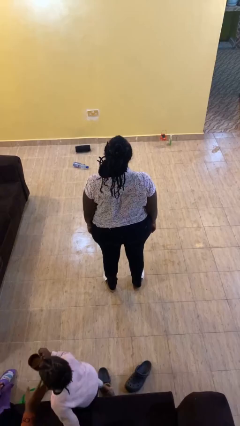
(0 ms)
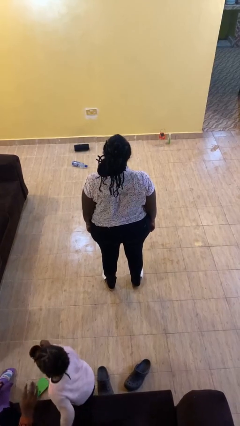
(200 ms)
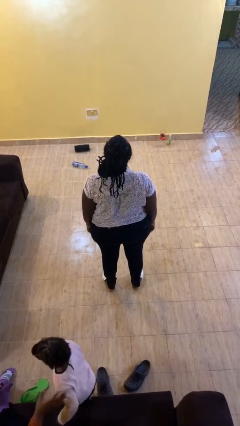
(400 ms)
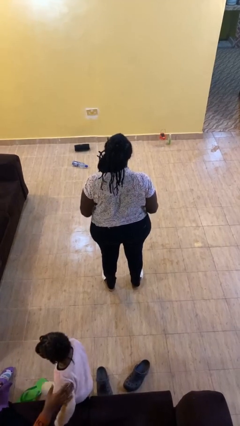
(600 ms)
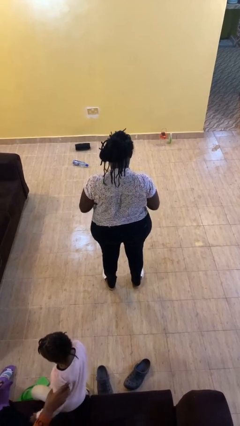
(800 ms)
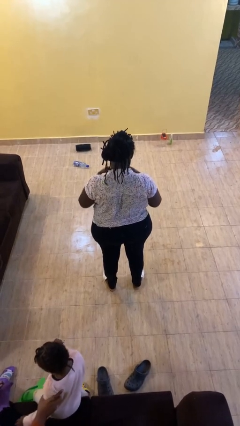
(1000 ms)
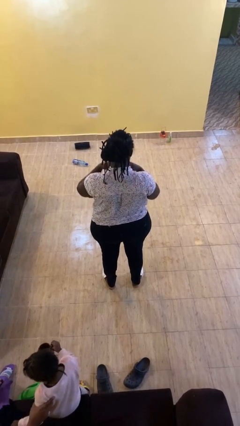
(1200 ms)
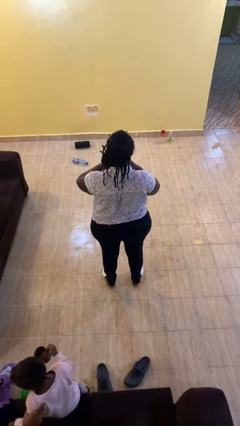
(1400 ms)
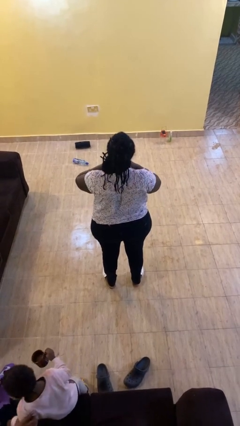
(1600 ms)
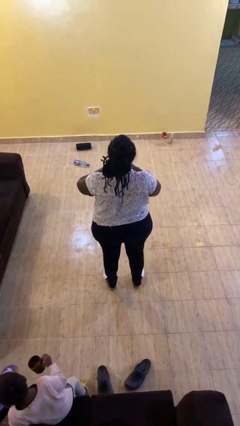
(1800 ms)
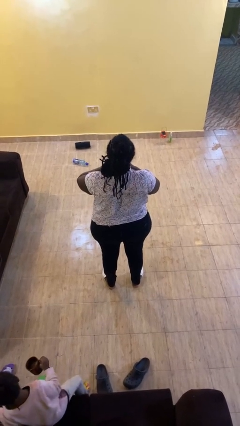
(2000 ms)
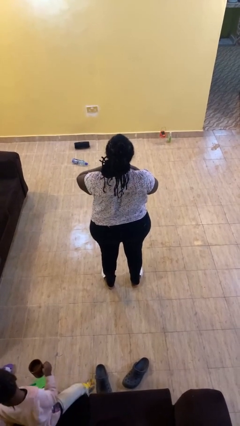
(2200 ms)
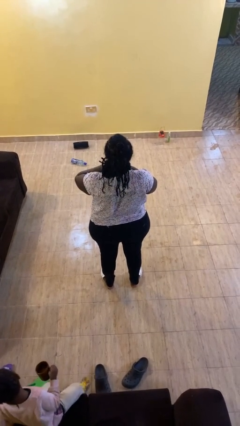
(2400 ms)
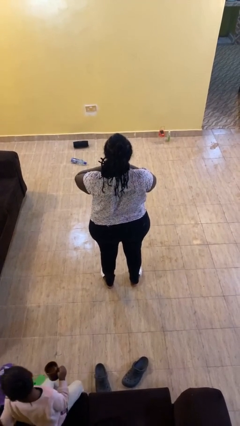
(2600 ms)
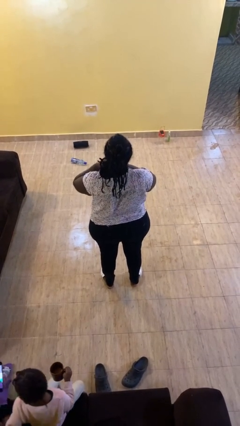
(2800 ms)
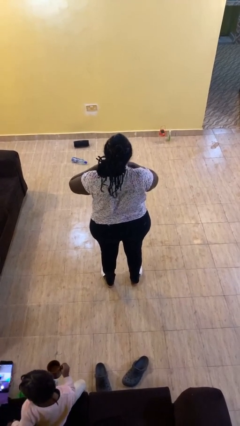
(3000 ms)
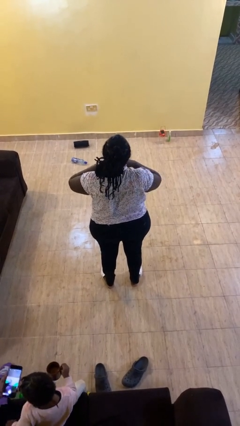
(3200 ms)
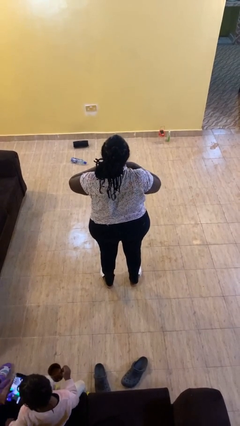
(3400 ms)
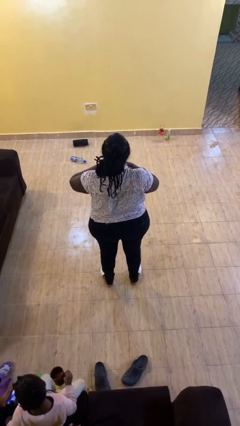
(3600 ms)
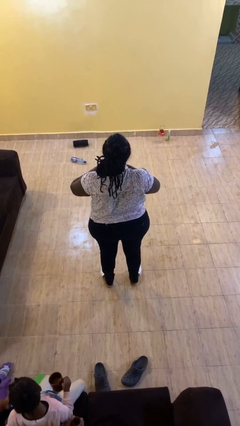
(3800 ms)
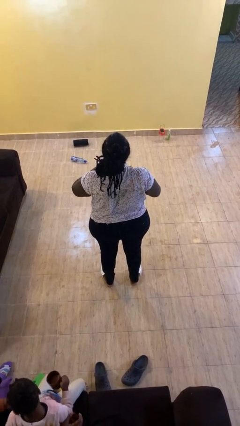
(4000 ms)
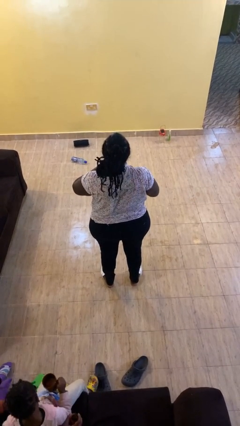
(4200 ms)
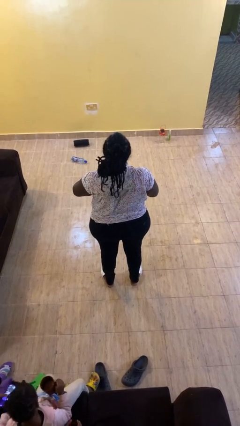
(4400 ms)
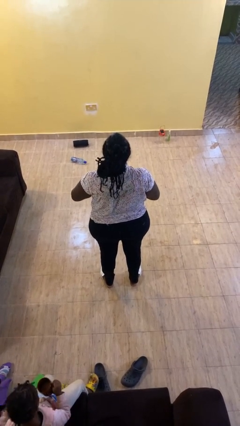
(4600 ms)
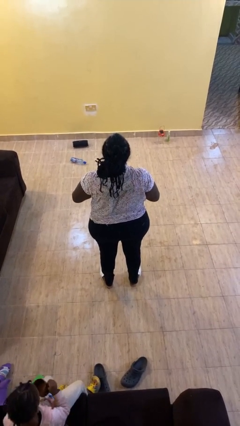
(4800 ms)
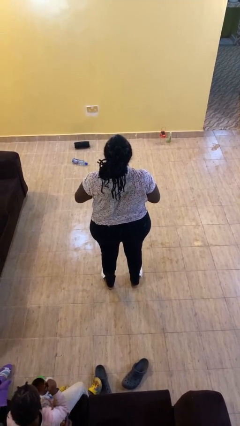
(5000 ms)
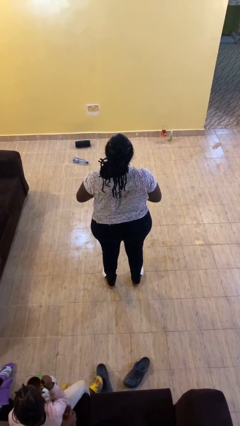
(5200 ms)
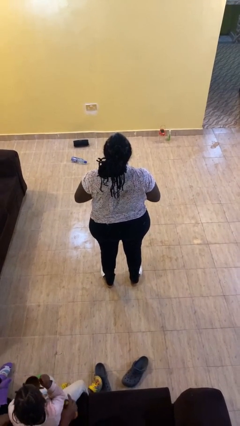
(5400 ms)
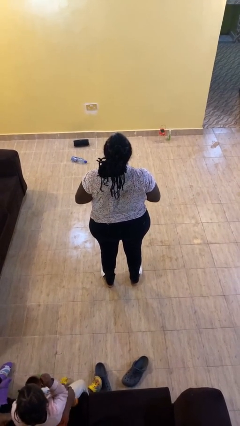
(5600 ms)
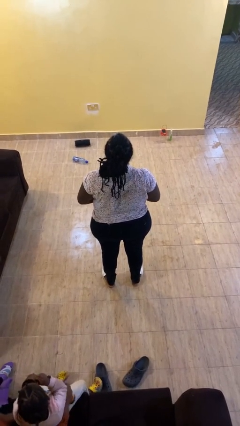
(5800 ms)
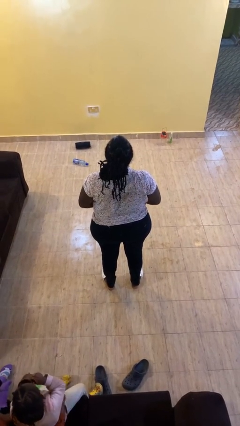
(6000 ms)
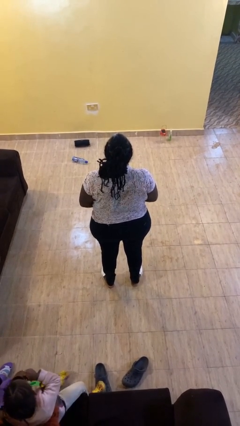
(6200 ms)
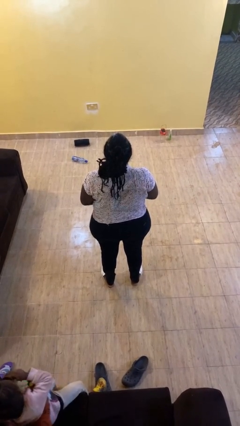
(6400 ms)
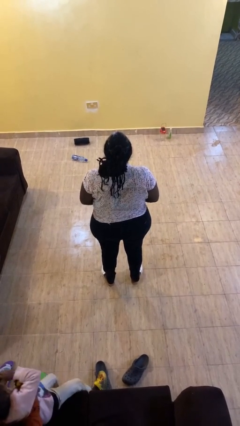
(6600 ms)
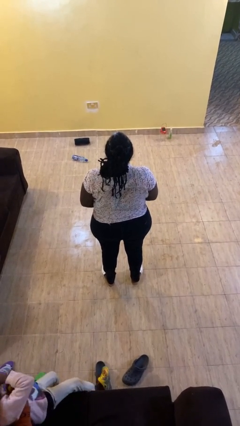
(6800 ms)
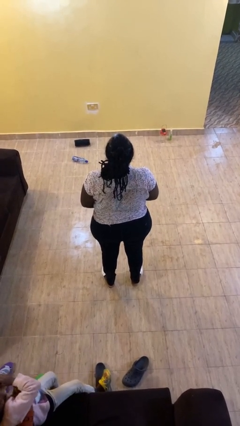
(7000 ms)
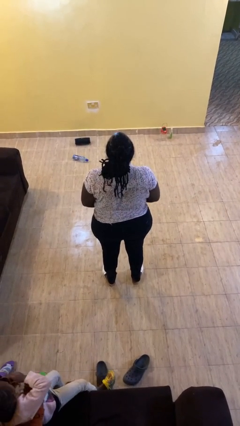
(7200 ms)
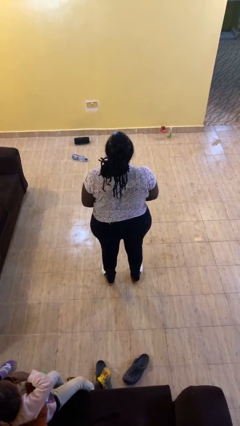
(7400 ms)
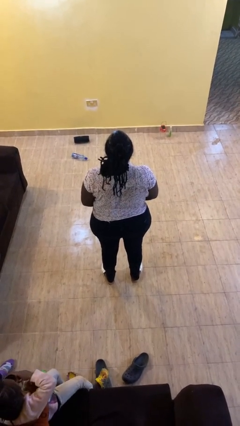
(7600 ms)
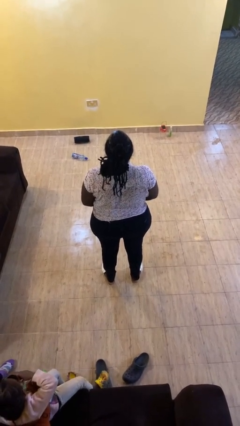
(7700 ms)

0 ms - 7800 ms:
person buttons shirt

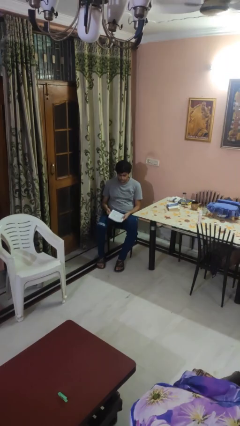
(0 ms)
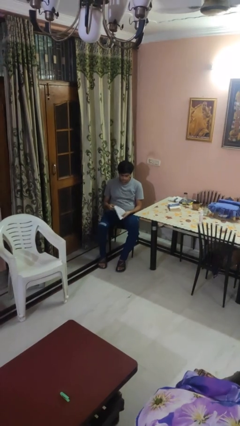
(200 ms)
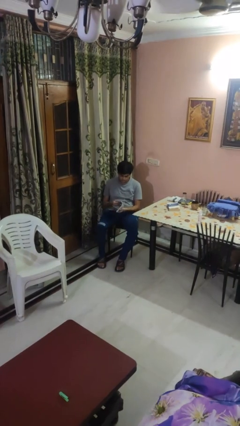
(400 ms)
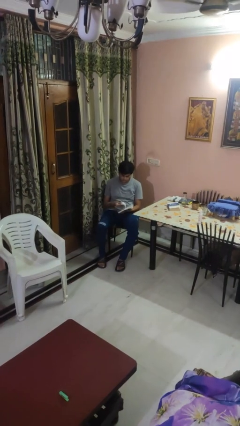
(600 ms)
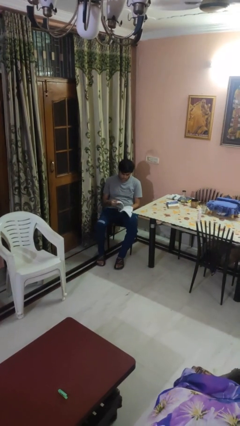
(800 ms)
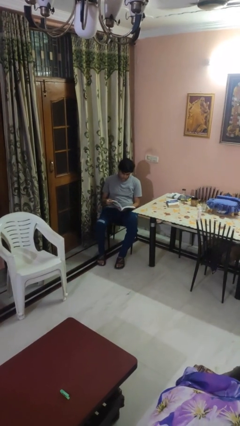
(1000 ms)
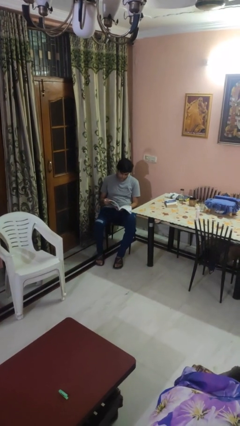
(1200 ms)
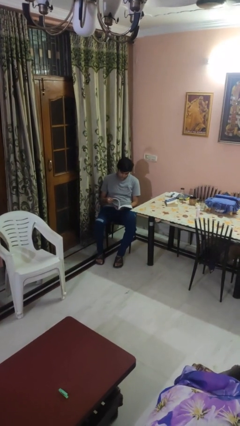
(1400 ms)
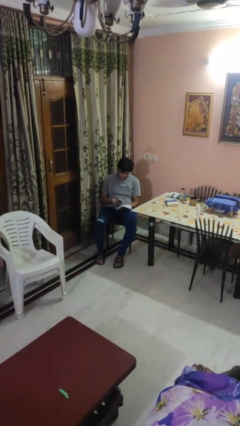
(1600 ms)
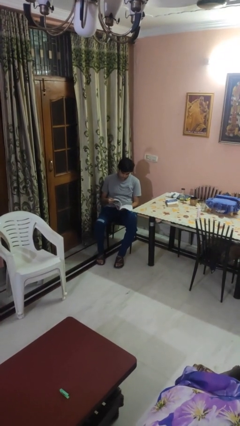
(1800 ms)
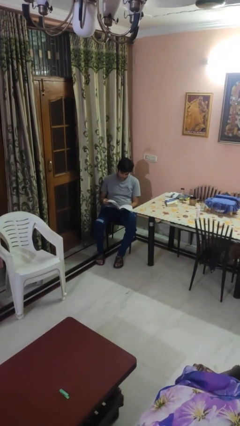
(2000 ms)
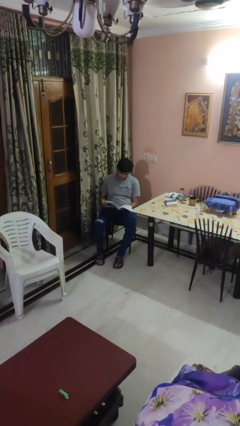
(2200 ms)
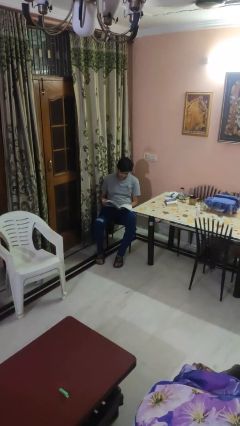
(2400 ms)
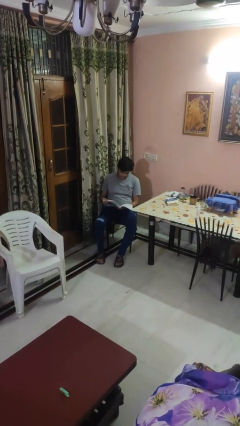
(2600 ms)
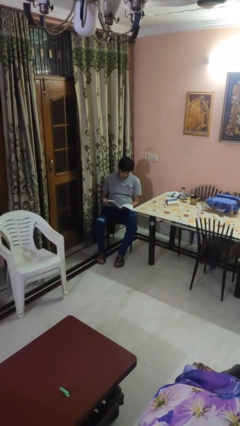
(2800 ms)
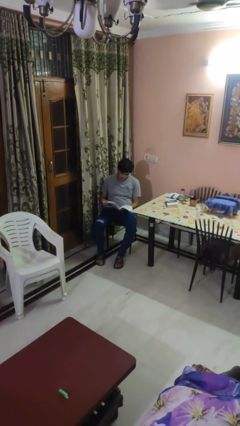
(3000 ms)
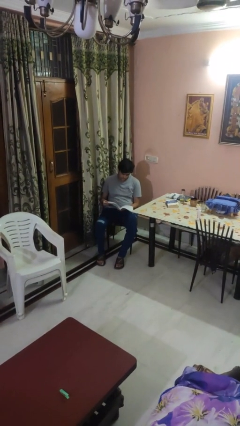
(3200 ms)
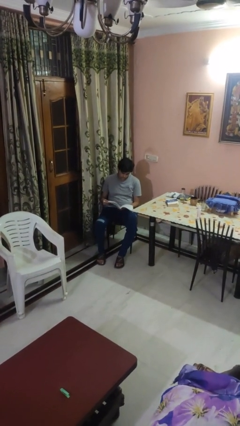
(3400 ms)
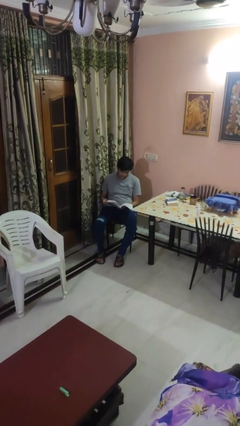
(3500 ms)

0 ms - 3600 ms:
person reads magazine

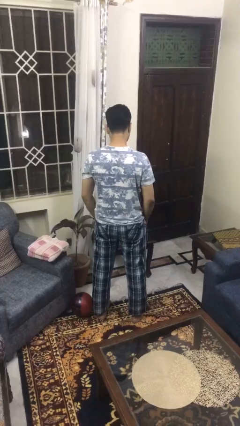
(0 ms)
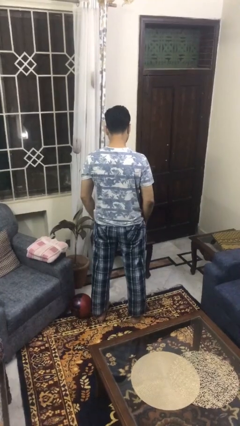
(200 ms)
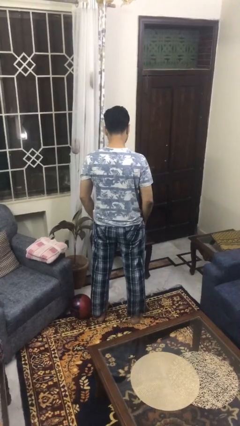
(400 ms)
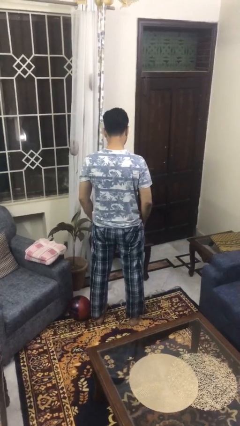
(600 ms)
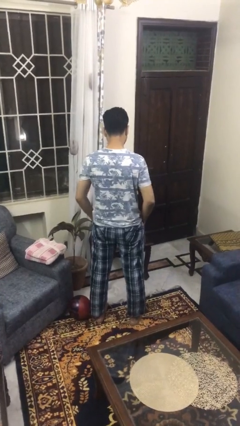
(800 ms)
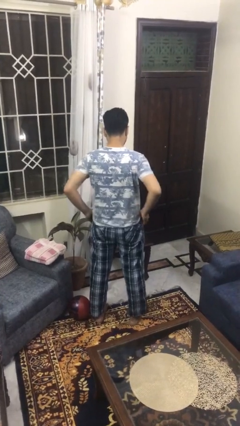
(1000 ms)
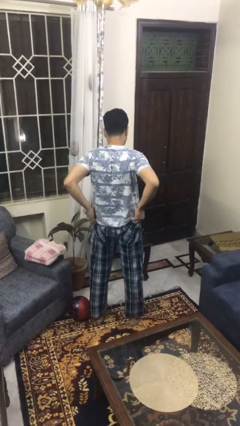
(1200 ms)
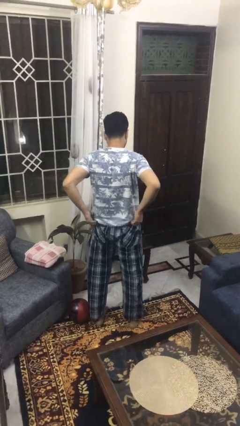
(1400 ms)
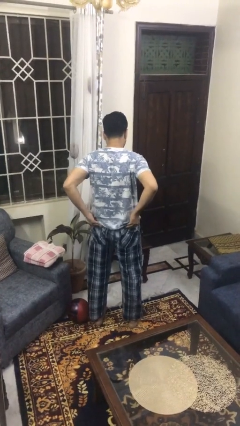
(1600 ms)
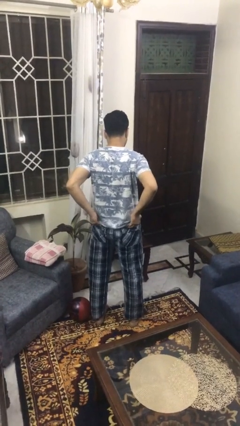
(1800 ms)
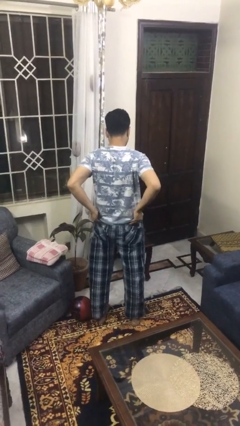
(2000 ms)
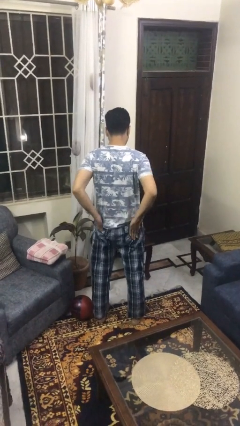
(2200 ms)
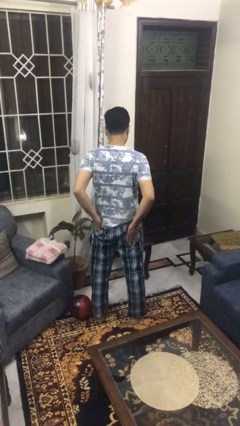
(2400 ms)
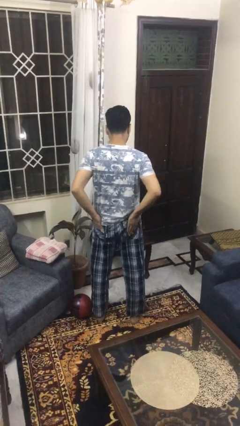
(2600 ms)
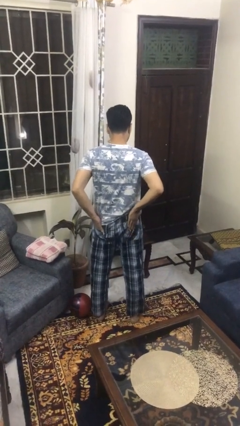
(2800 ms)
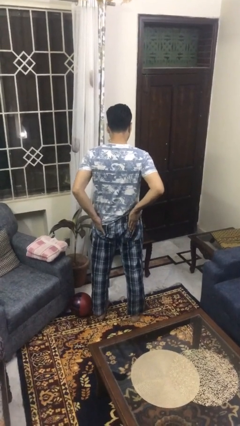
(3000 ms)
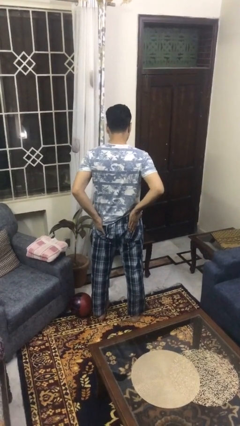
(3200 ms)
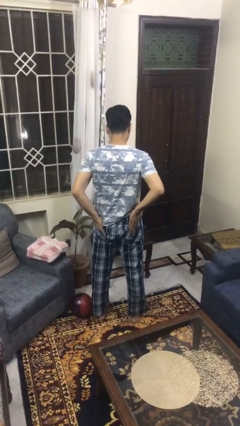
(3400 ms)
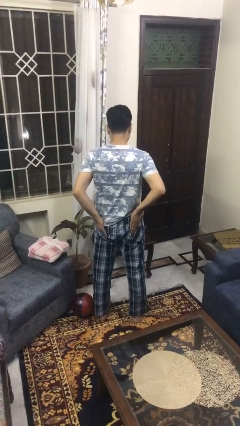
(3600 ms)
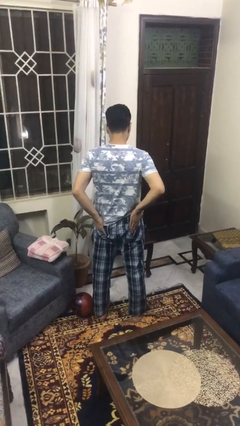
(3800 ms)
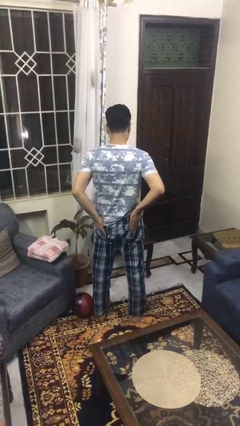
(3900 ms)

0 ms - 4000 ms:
person puts hands in back pockets

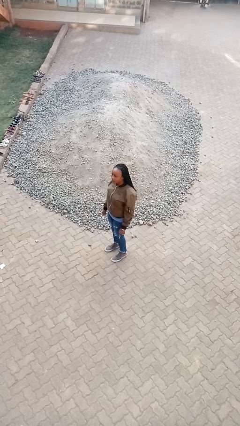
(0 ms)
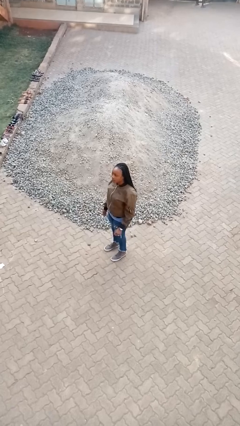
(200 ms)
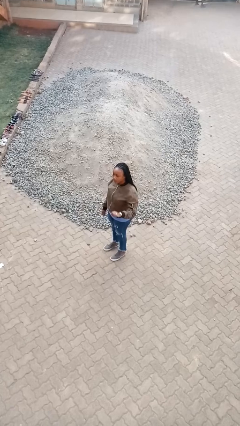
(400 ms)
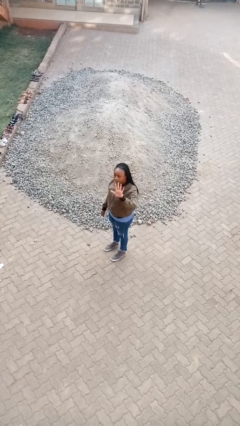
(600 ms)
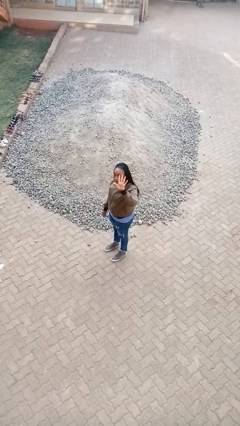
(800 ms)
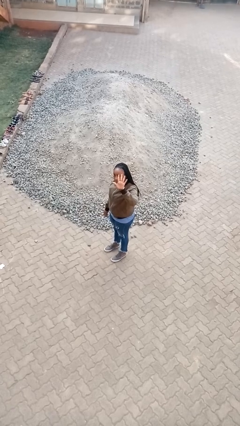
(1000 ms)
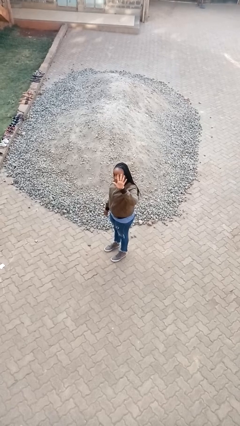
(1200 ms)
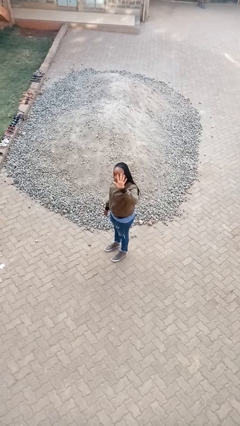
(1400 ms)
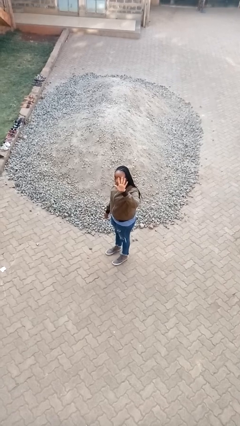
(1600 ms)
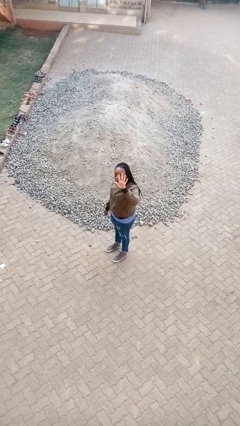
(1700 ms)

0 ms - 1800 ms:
person gestures number five

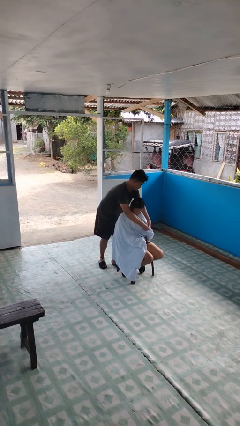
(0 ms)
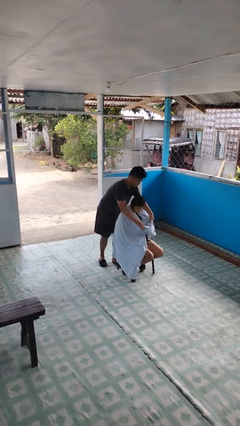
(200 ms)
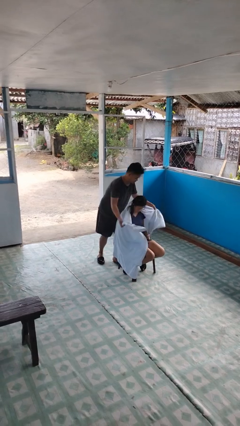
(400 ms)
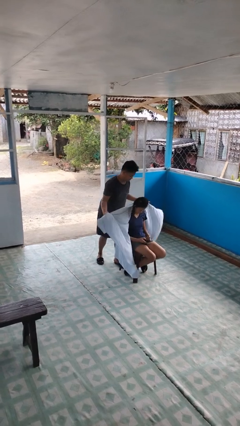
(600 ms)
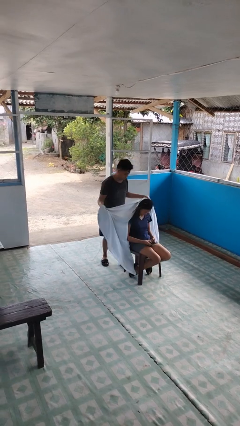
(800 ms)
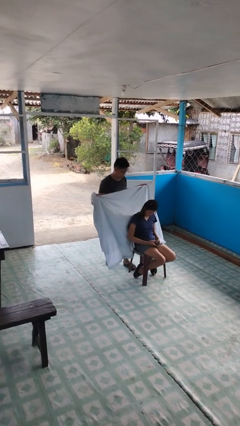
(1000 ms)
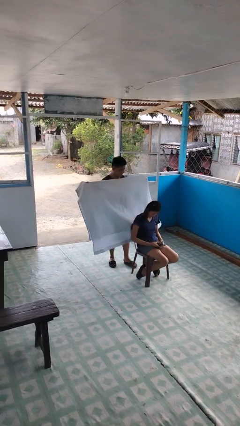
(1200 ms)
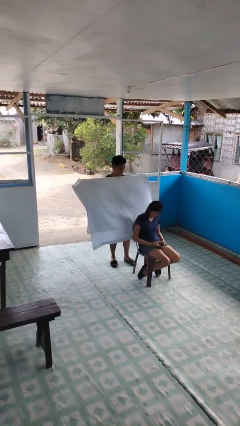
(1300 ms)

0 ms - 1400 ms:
person uncovers friend with blanket
